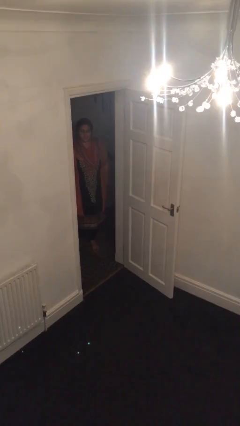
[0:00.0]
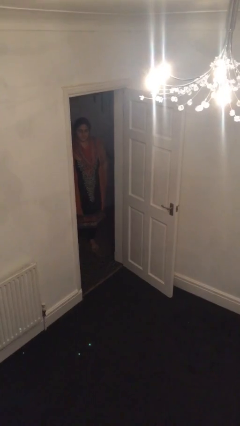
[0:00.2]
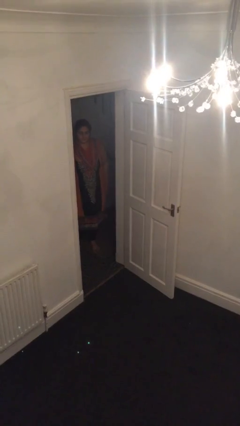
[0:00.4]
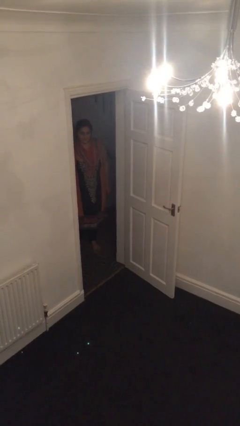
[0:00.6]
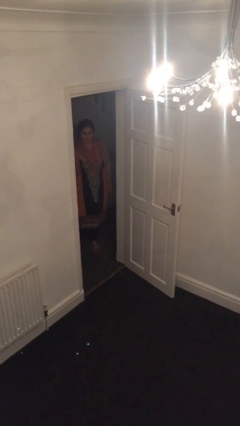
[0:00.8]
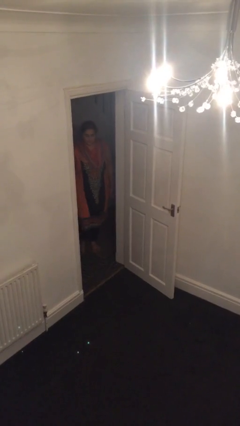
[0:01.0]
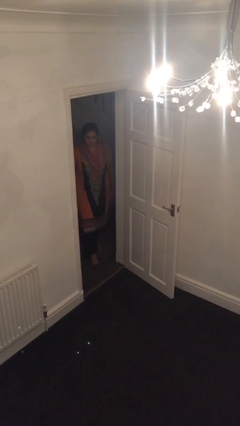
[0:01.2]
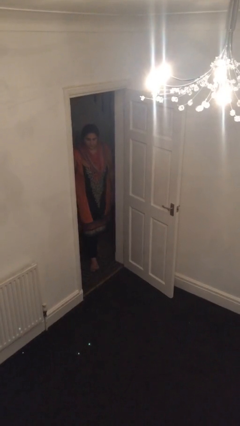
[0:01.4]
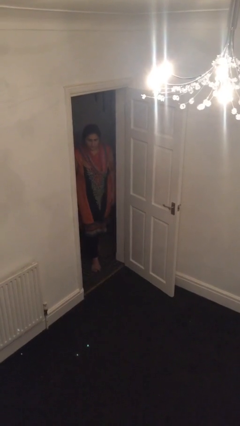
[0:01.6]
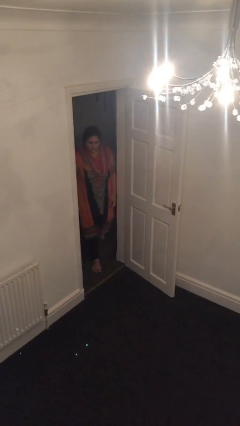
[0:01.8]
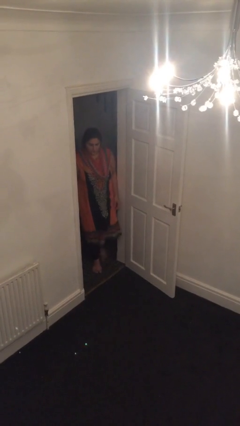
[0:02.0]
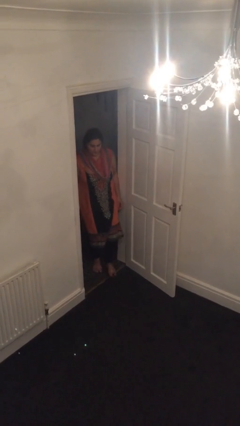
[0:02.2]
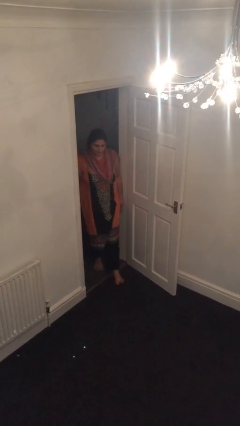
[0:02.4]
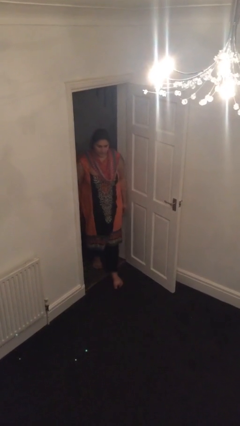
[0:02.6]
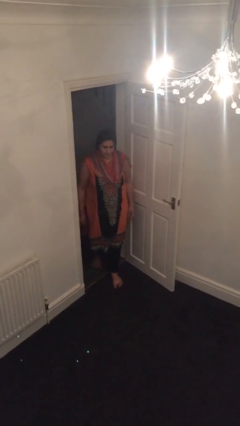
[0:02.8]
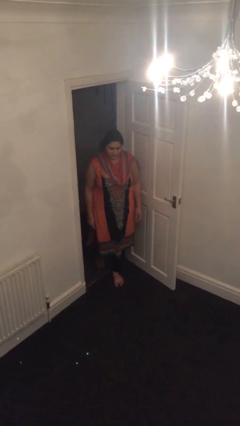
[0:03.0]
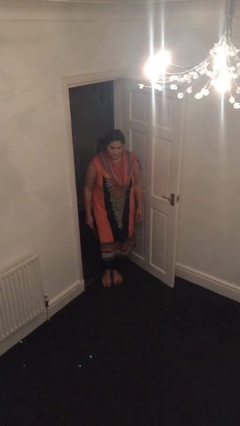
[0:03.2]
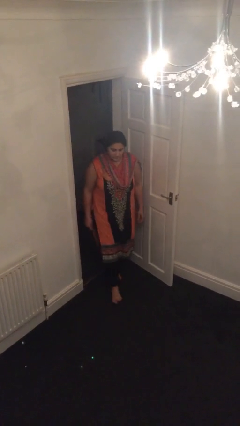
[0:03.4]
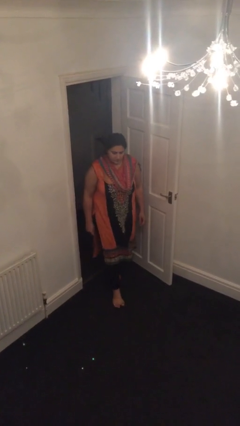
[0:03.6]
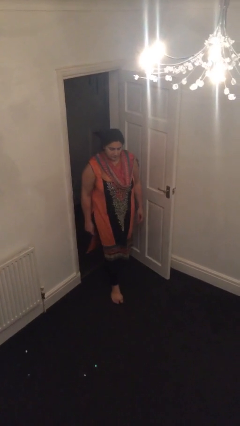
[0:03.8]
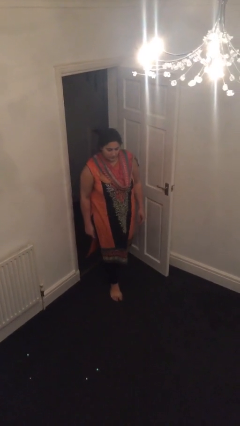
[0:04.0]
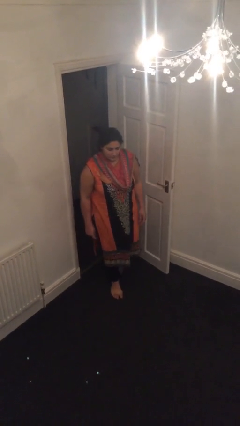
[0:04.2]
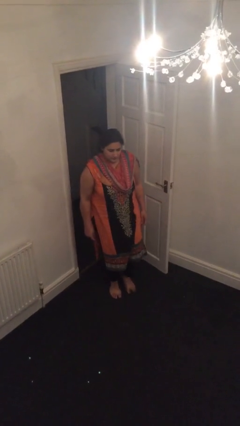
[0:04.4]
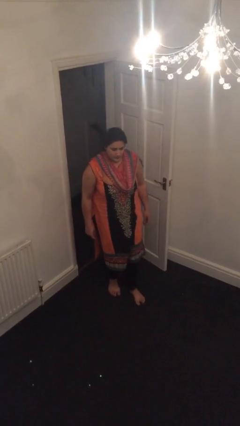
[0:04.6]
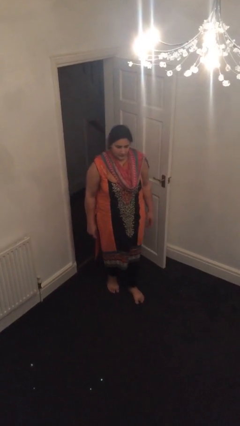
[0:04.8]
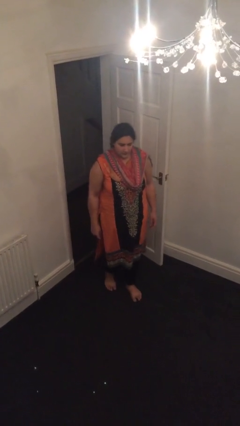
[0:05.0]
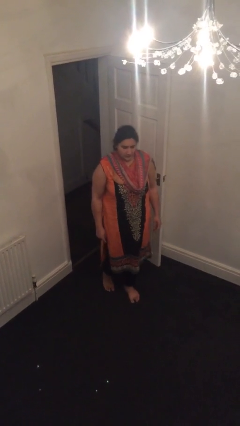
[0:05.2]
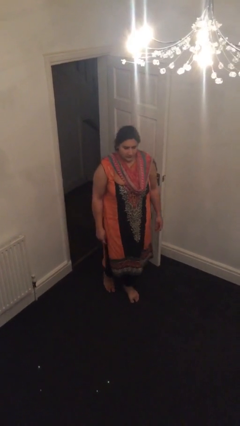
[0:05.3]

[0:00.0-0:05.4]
person enters scene through structure

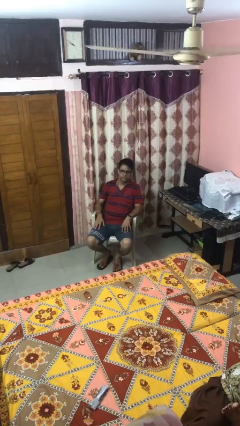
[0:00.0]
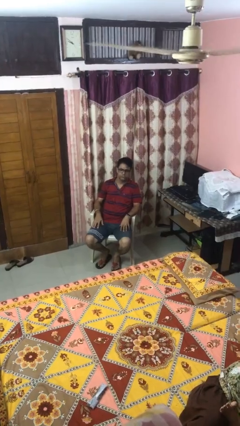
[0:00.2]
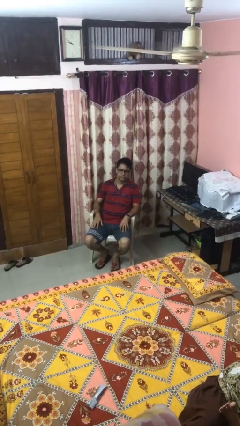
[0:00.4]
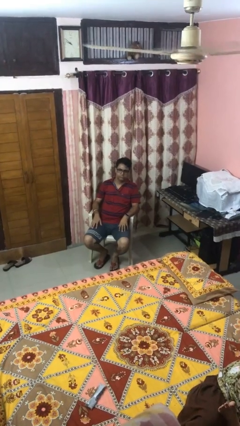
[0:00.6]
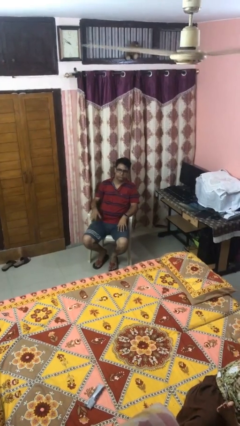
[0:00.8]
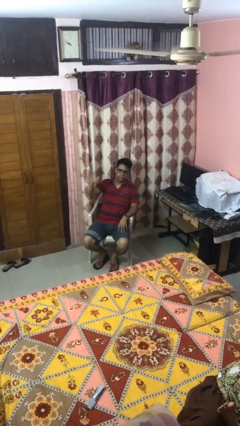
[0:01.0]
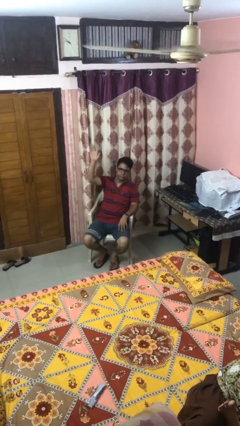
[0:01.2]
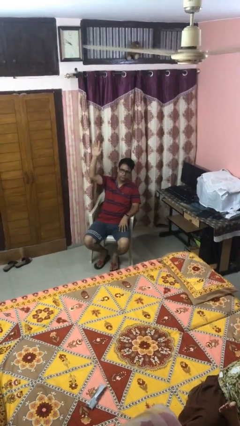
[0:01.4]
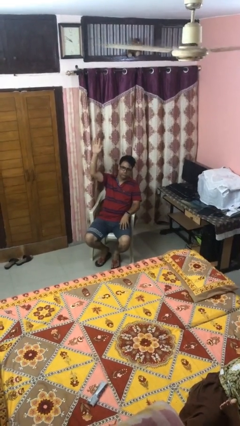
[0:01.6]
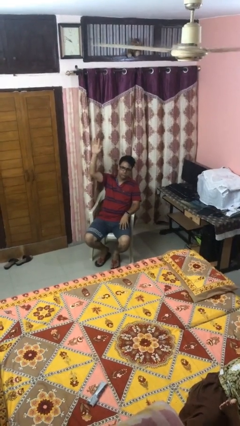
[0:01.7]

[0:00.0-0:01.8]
person gestures raise hand

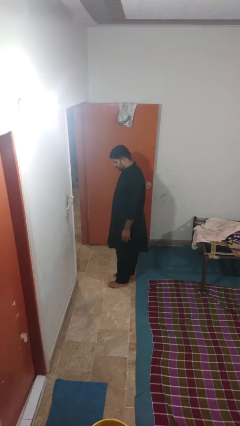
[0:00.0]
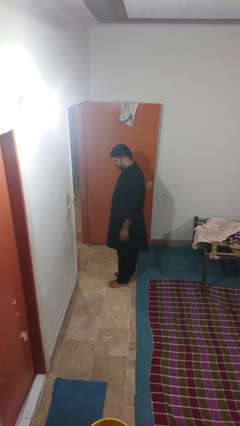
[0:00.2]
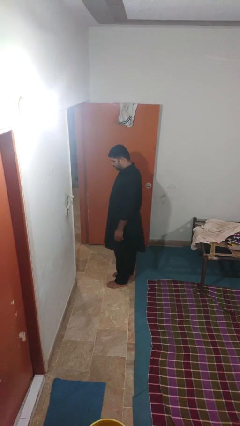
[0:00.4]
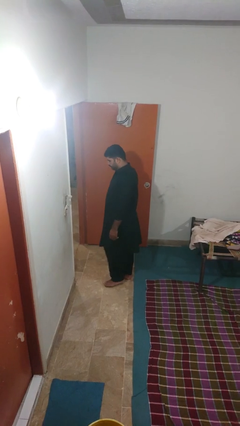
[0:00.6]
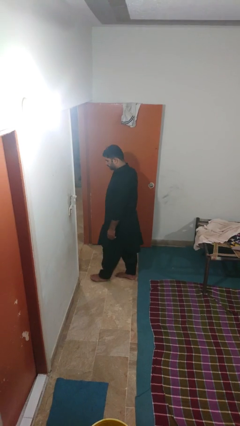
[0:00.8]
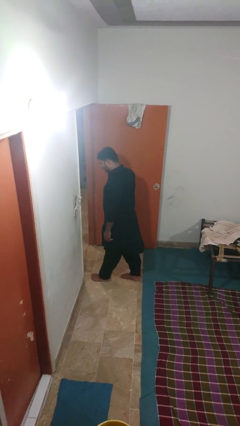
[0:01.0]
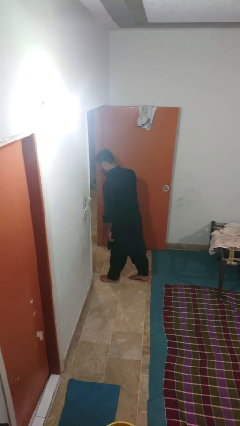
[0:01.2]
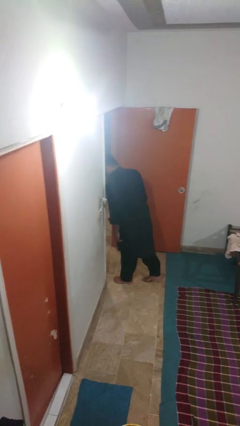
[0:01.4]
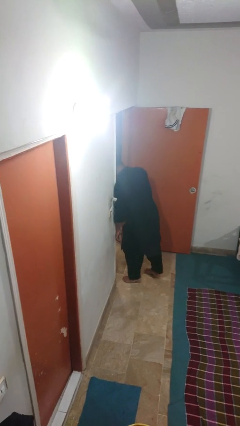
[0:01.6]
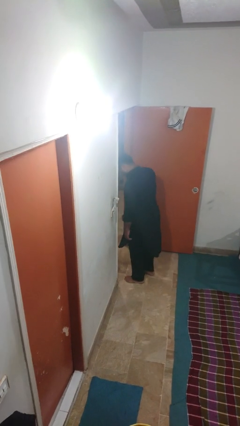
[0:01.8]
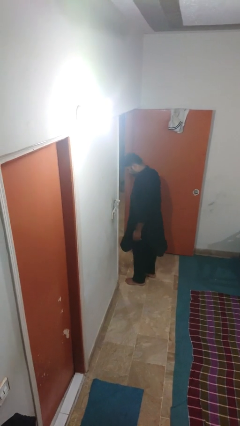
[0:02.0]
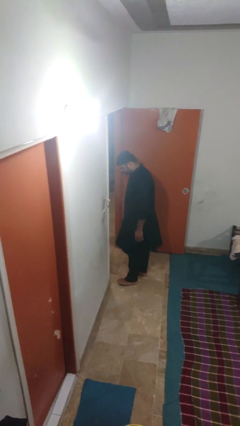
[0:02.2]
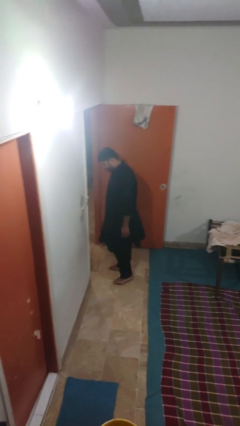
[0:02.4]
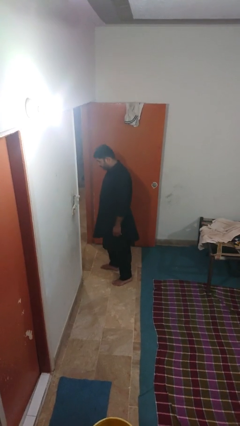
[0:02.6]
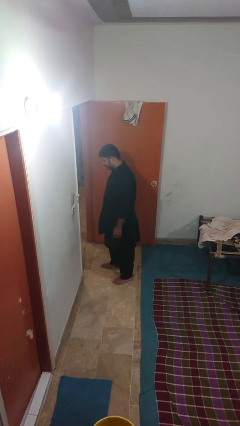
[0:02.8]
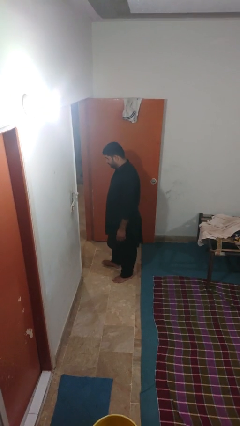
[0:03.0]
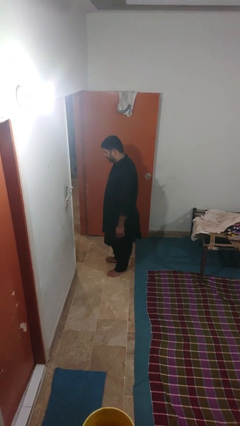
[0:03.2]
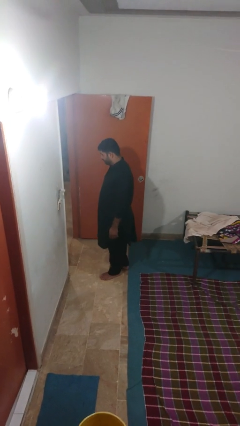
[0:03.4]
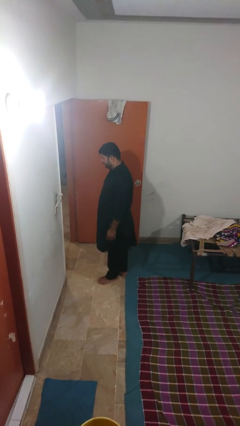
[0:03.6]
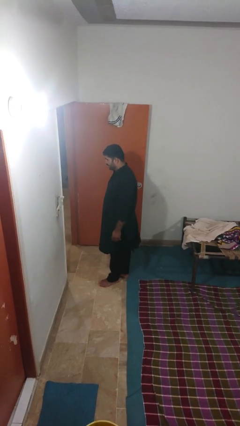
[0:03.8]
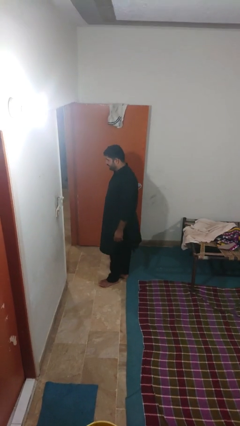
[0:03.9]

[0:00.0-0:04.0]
person bumps into wall

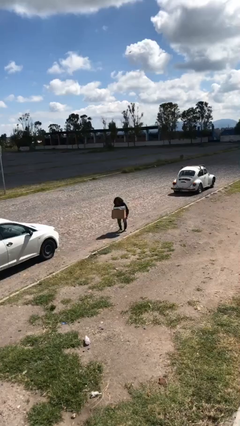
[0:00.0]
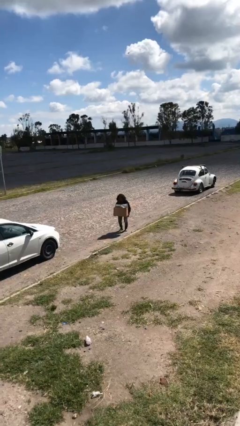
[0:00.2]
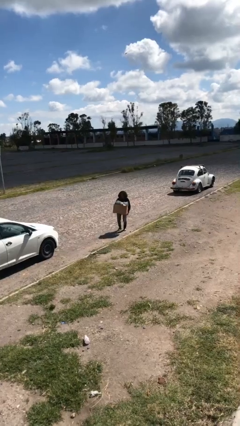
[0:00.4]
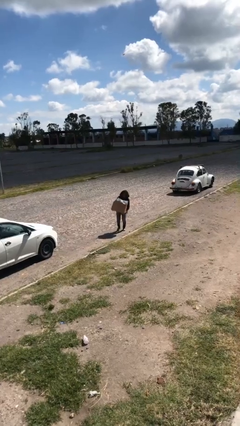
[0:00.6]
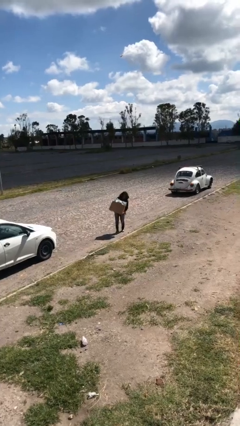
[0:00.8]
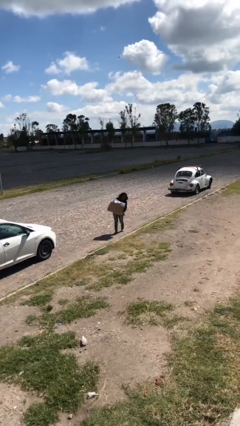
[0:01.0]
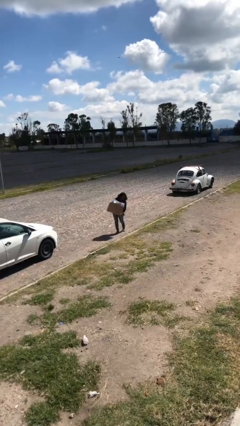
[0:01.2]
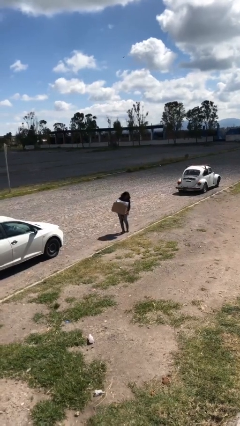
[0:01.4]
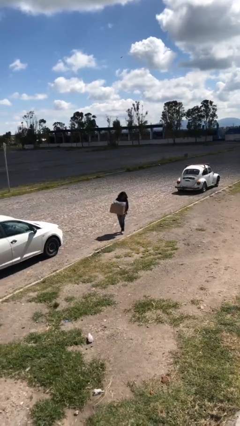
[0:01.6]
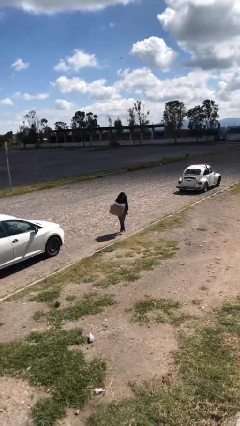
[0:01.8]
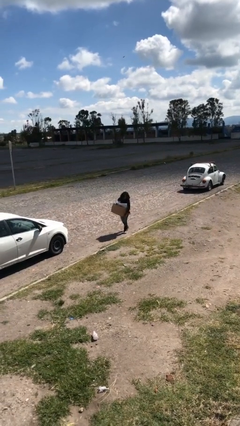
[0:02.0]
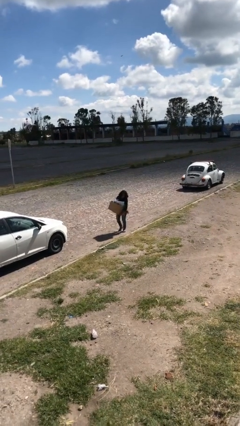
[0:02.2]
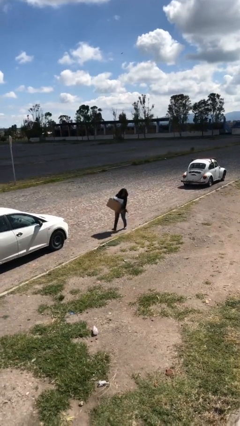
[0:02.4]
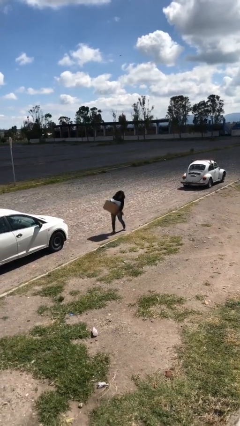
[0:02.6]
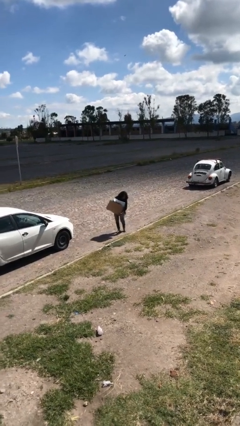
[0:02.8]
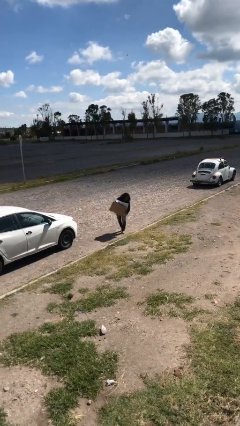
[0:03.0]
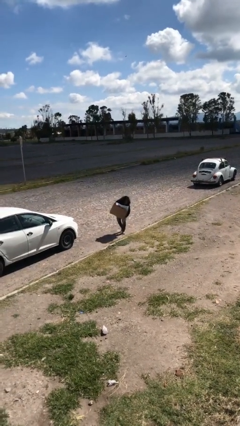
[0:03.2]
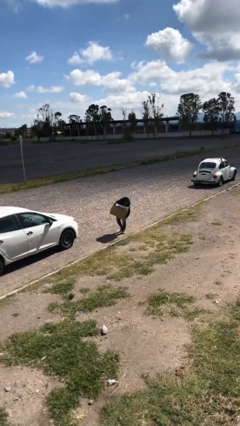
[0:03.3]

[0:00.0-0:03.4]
person carries heavy object

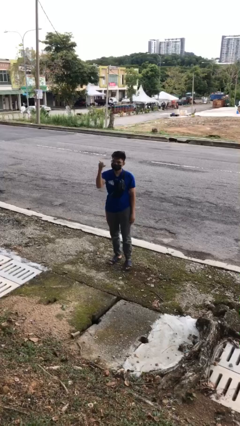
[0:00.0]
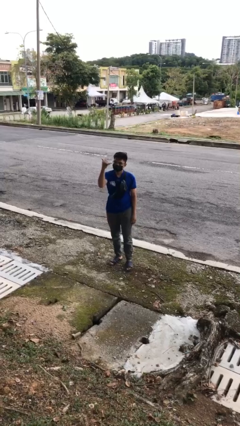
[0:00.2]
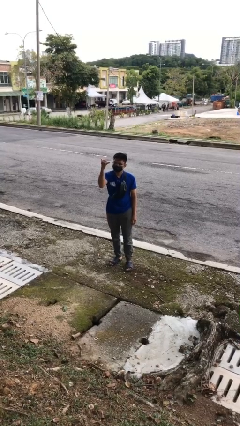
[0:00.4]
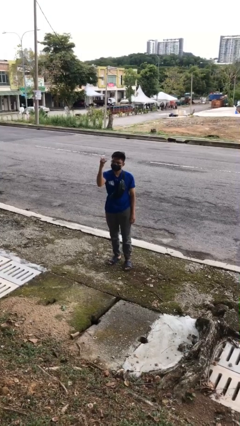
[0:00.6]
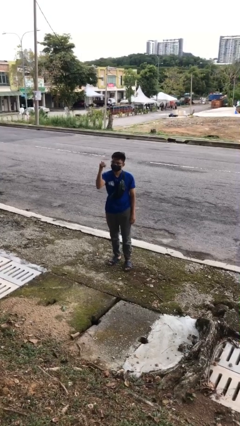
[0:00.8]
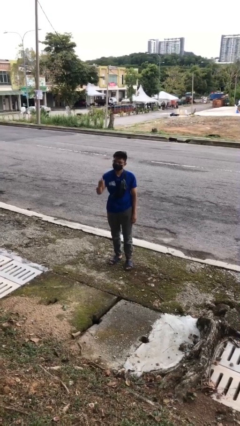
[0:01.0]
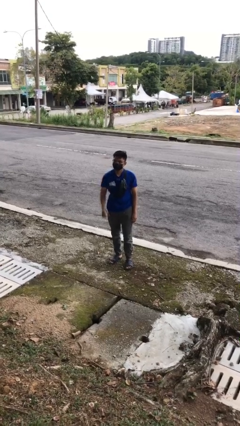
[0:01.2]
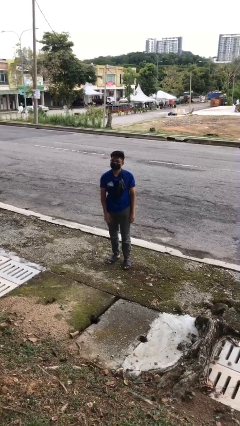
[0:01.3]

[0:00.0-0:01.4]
person gestures hang loose

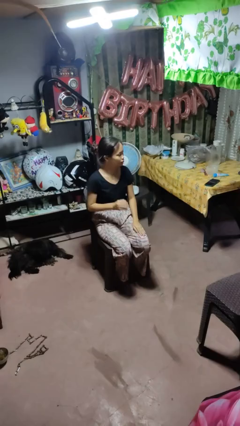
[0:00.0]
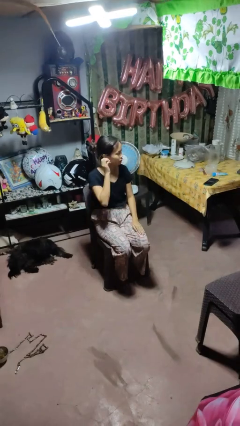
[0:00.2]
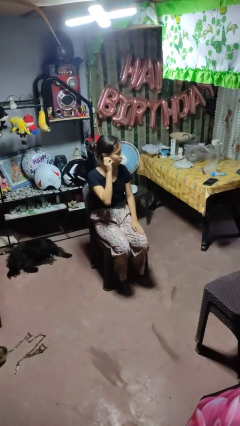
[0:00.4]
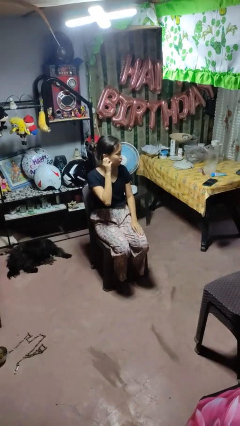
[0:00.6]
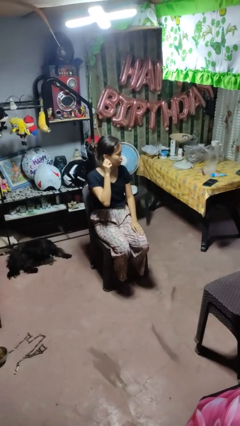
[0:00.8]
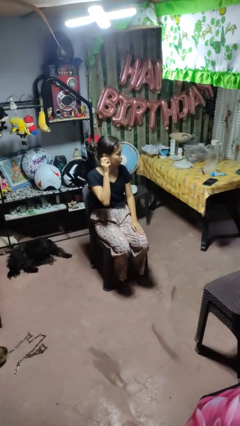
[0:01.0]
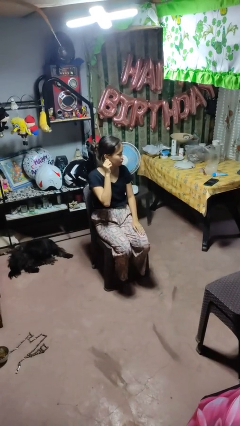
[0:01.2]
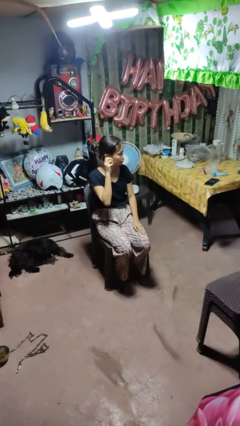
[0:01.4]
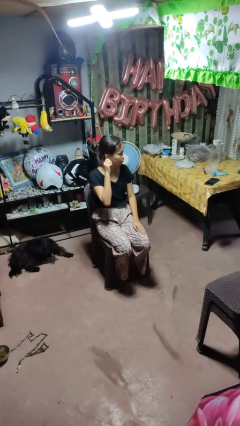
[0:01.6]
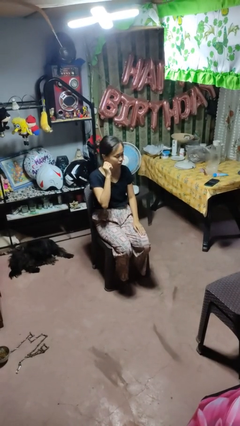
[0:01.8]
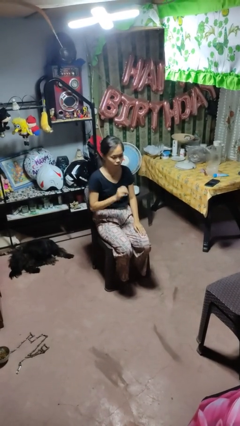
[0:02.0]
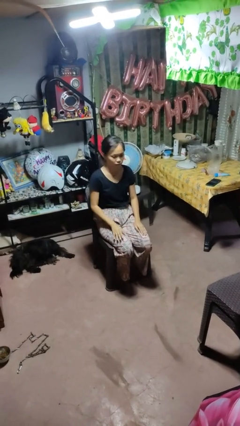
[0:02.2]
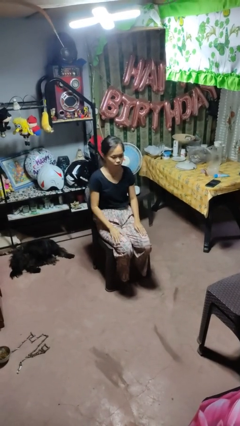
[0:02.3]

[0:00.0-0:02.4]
person touches earlobe
